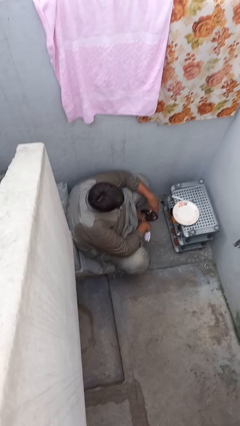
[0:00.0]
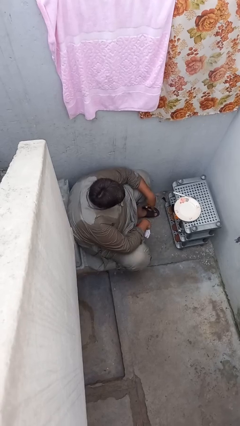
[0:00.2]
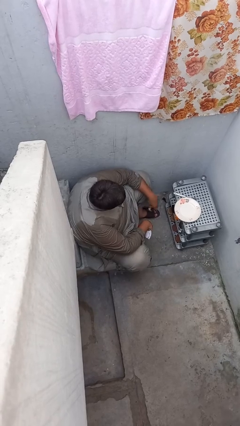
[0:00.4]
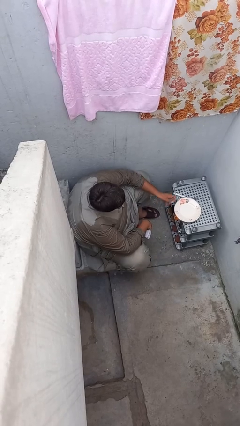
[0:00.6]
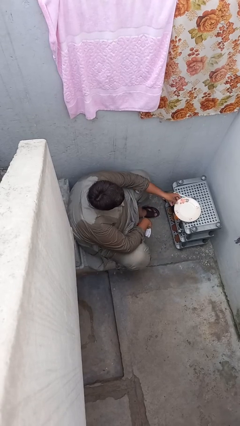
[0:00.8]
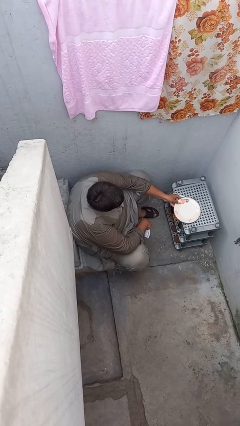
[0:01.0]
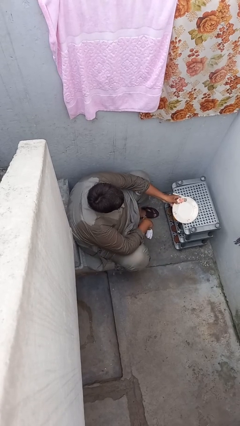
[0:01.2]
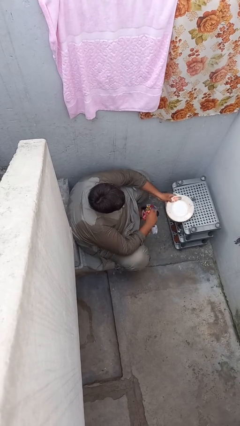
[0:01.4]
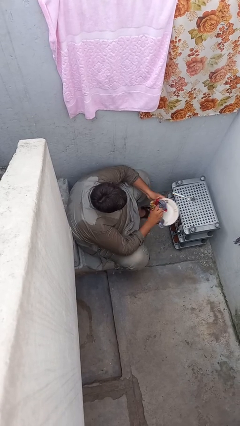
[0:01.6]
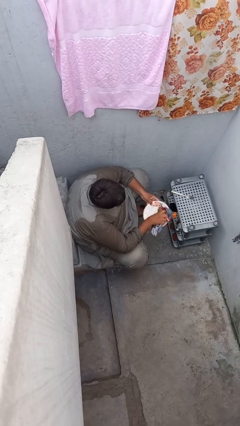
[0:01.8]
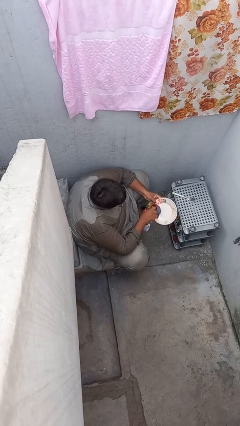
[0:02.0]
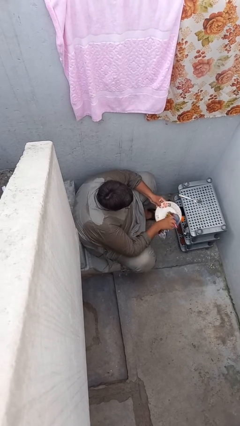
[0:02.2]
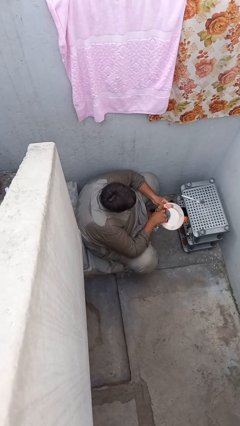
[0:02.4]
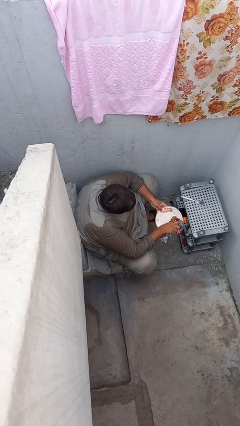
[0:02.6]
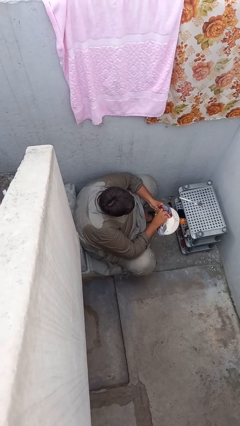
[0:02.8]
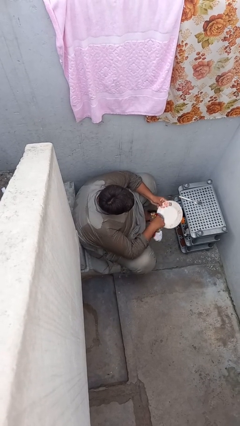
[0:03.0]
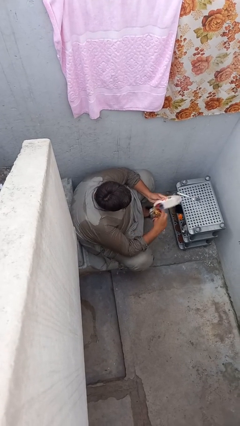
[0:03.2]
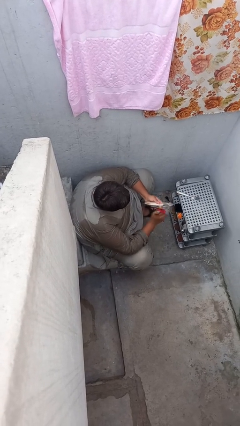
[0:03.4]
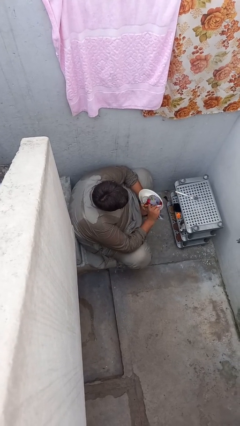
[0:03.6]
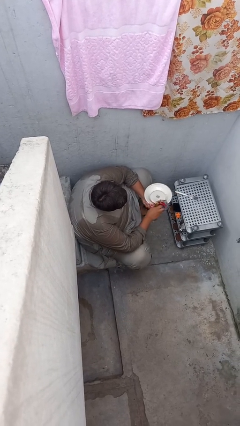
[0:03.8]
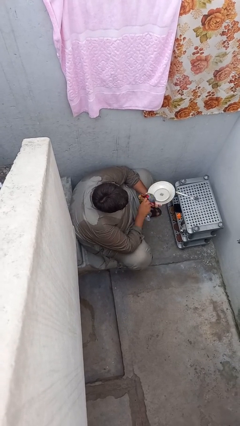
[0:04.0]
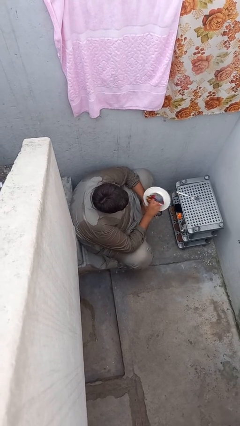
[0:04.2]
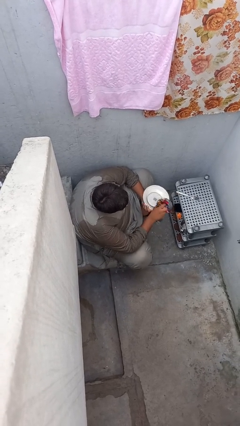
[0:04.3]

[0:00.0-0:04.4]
person dries dish

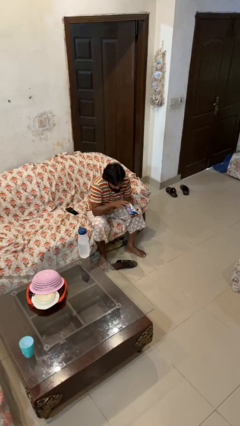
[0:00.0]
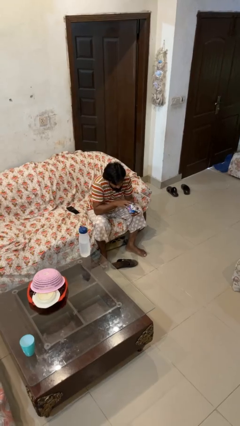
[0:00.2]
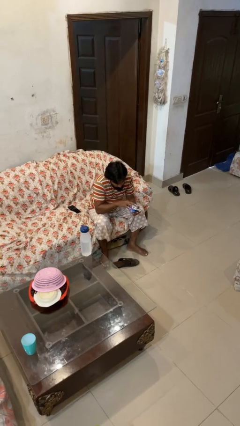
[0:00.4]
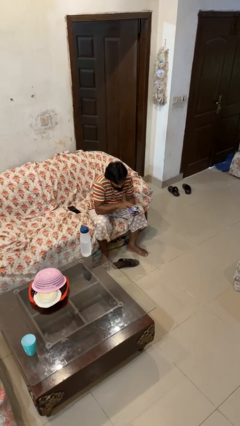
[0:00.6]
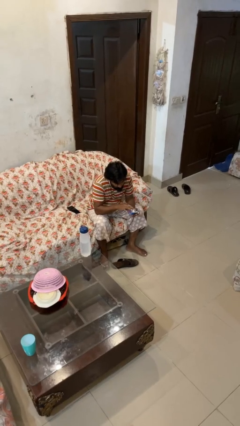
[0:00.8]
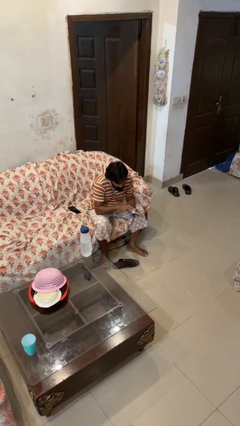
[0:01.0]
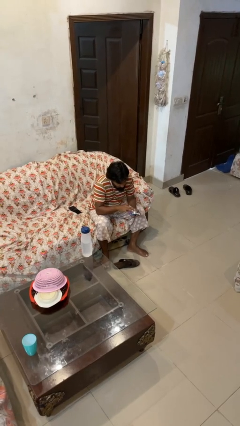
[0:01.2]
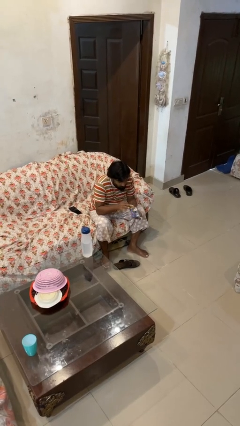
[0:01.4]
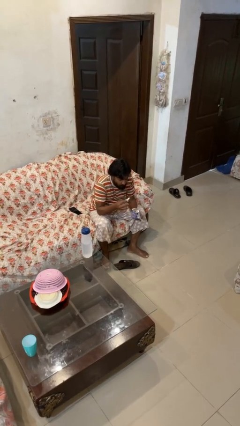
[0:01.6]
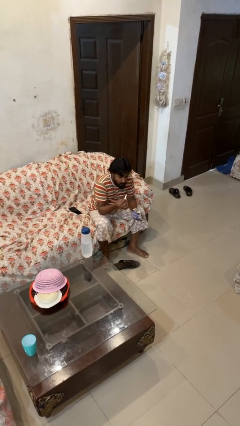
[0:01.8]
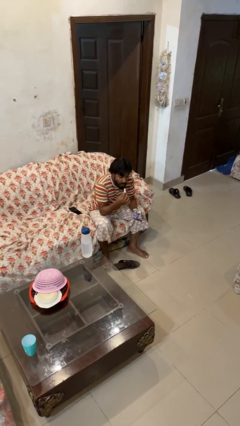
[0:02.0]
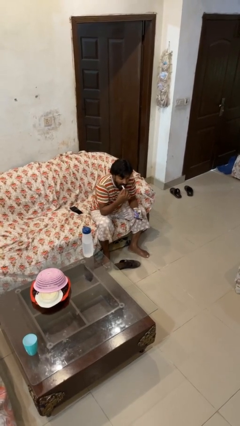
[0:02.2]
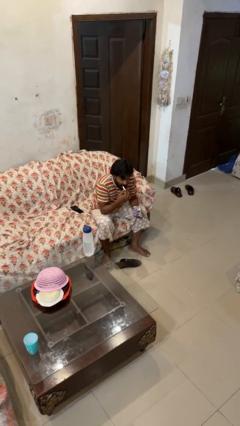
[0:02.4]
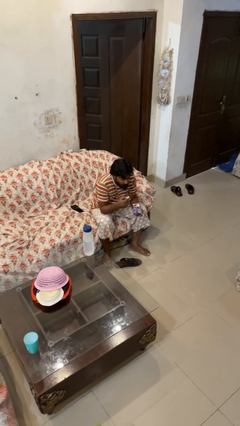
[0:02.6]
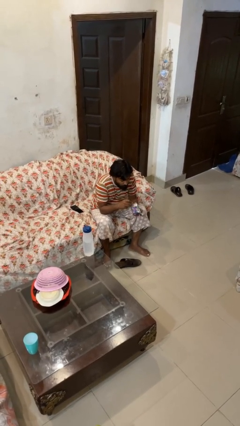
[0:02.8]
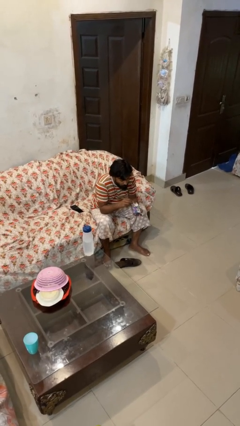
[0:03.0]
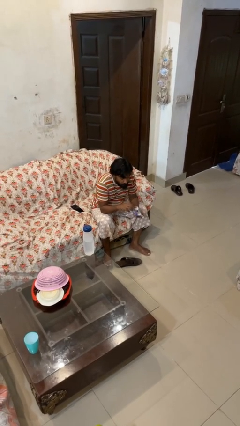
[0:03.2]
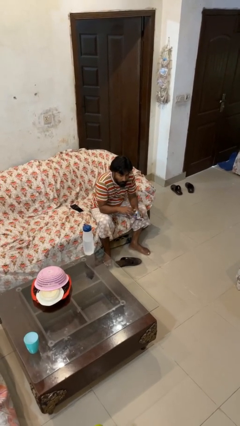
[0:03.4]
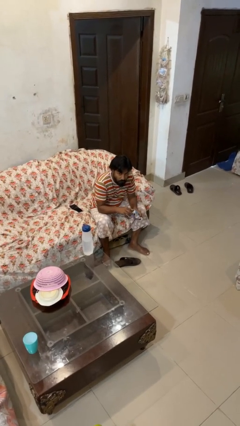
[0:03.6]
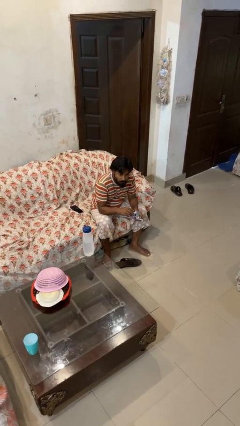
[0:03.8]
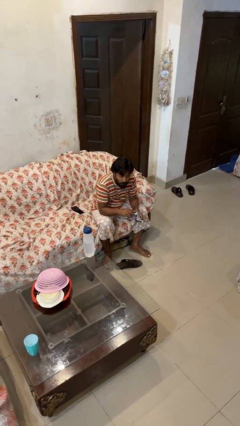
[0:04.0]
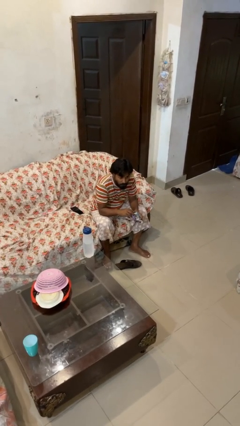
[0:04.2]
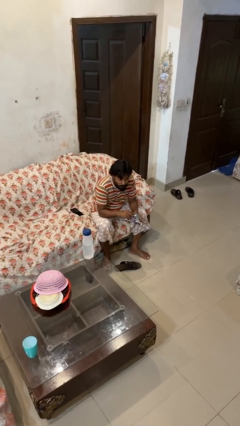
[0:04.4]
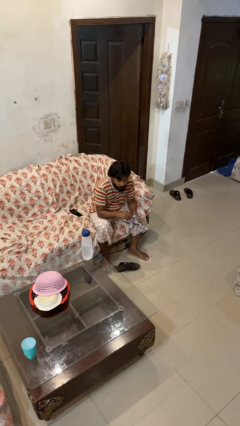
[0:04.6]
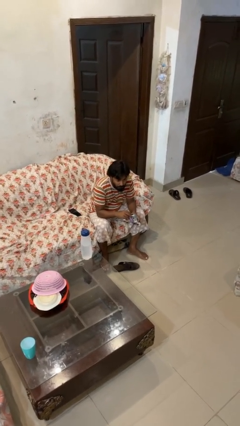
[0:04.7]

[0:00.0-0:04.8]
person eats snack from bag

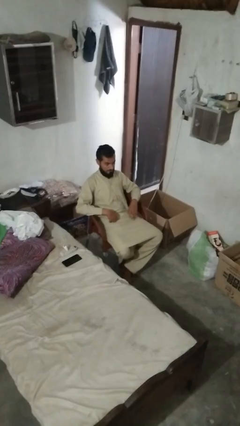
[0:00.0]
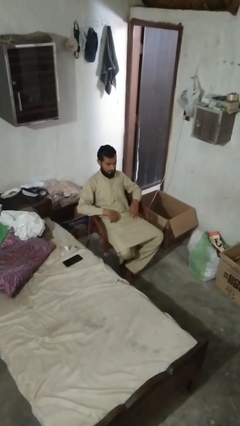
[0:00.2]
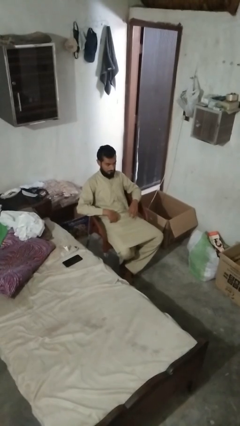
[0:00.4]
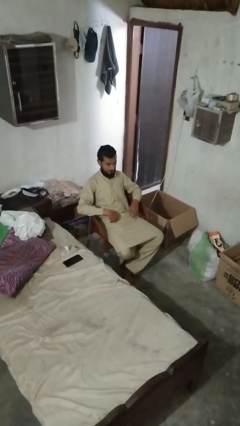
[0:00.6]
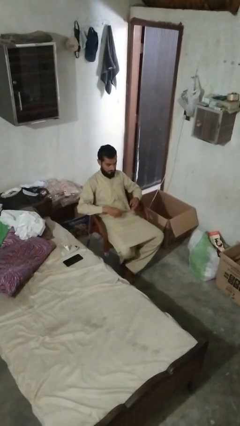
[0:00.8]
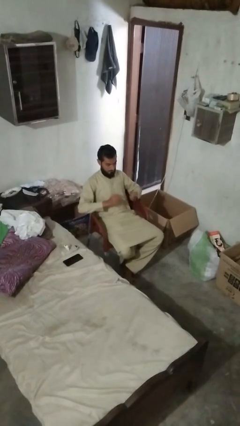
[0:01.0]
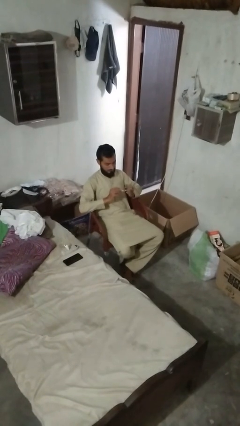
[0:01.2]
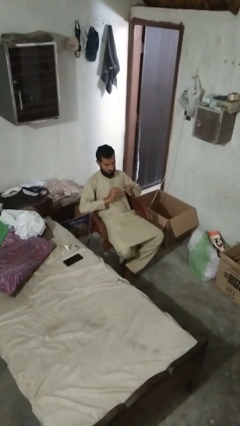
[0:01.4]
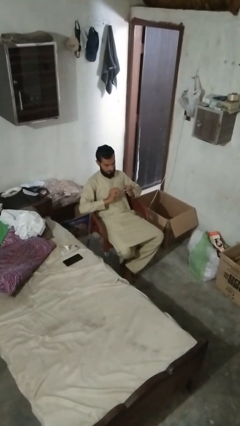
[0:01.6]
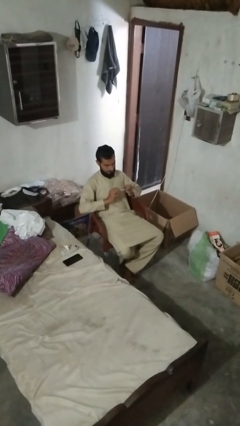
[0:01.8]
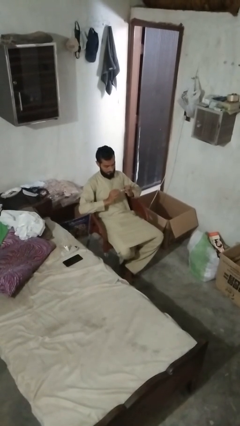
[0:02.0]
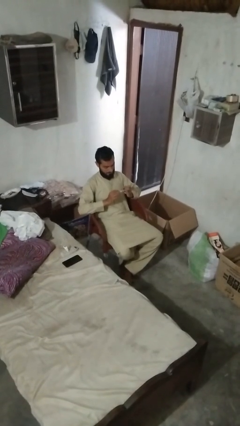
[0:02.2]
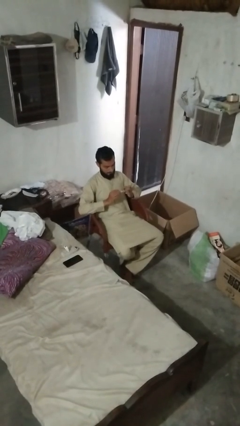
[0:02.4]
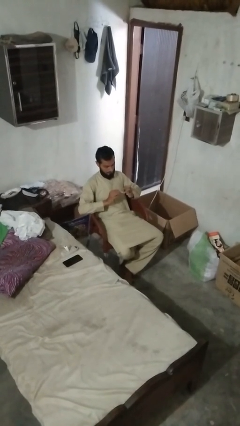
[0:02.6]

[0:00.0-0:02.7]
person clips fingernails

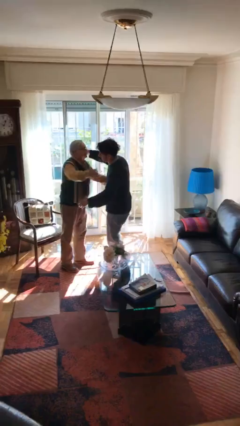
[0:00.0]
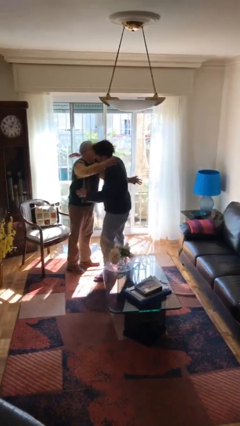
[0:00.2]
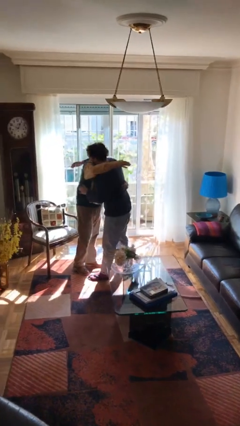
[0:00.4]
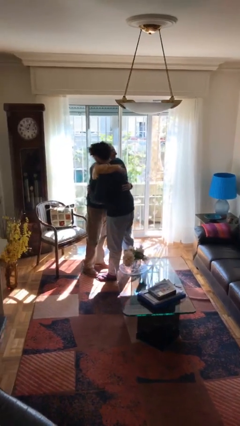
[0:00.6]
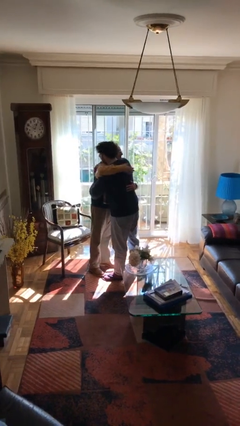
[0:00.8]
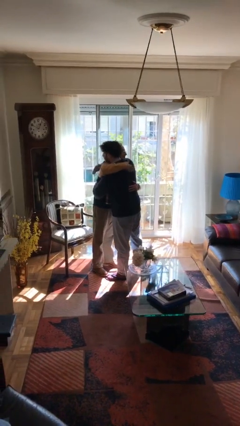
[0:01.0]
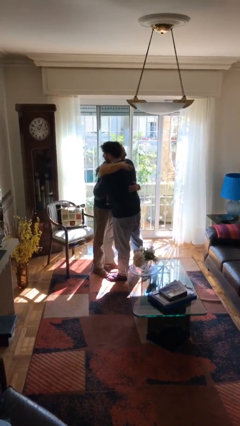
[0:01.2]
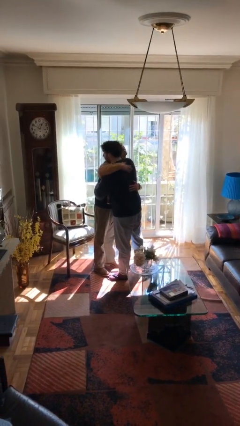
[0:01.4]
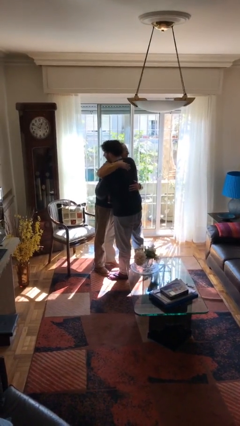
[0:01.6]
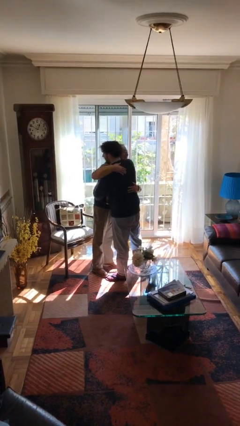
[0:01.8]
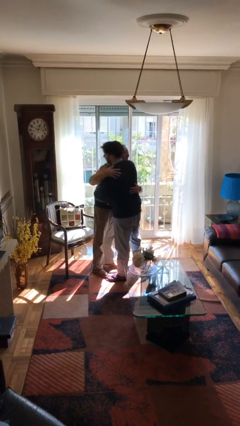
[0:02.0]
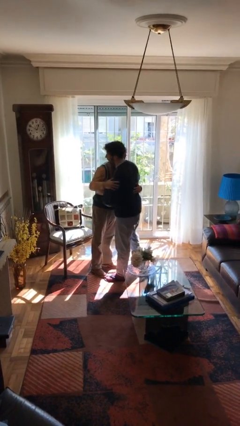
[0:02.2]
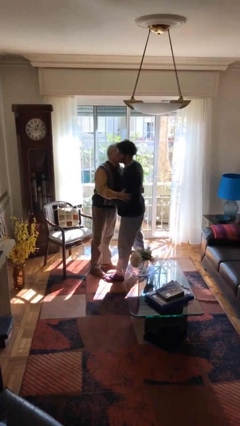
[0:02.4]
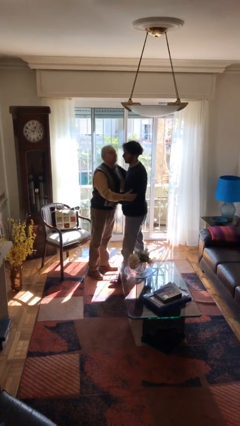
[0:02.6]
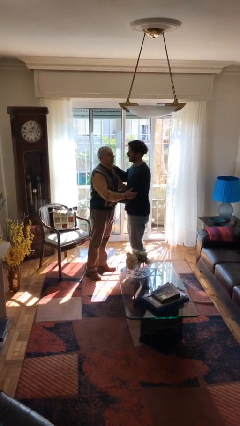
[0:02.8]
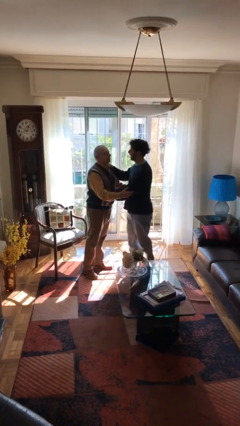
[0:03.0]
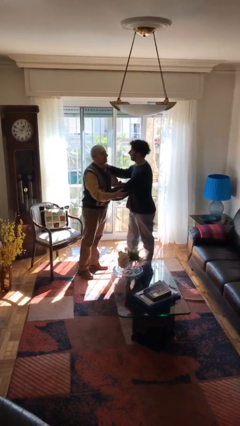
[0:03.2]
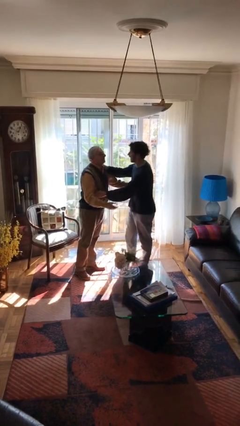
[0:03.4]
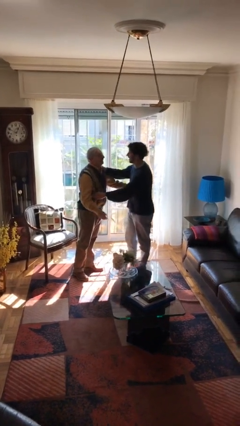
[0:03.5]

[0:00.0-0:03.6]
person embraces person

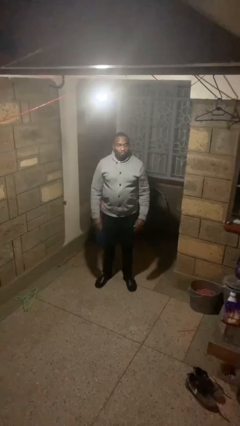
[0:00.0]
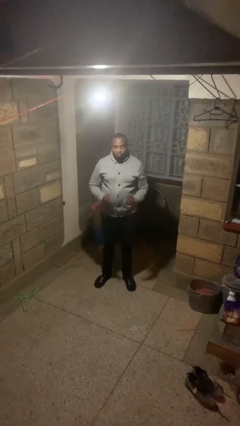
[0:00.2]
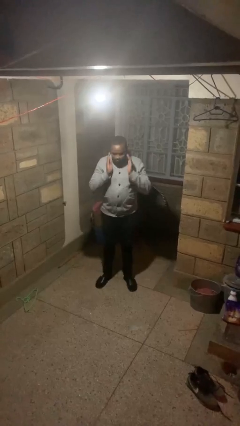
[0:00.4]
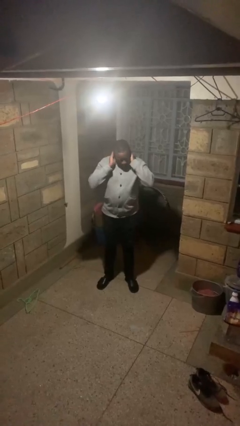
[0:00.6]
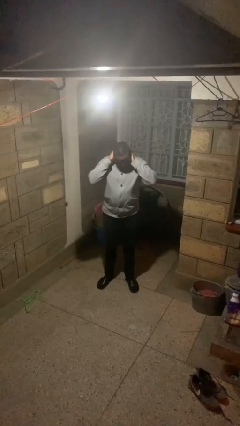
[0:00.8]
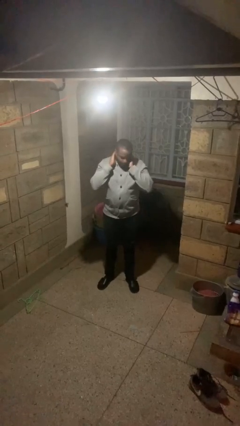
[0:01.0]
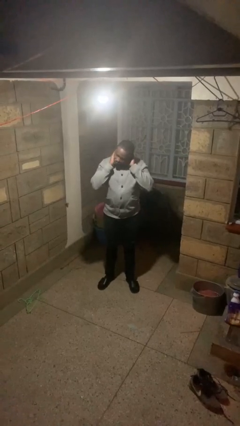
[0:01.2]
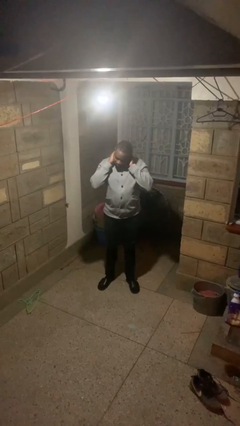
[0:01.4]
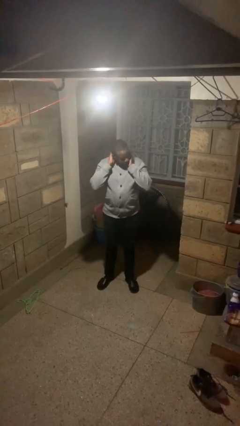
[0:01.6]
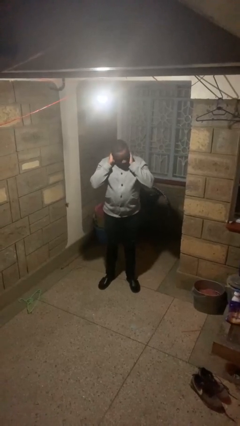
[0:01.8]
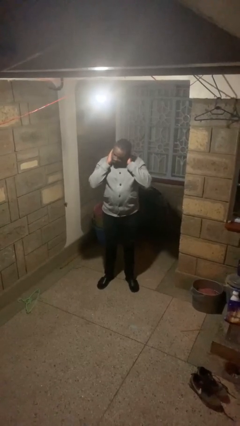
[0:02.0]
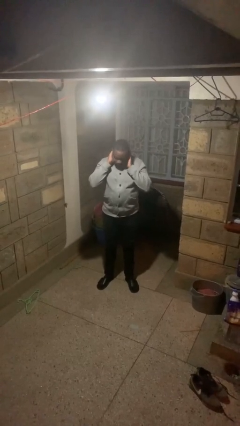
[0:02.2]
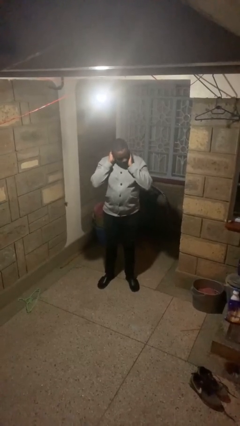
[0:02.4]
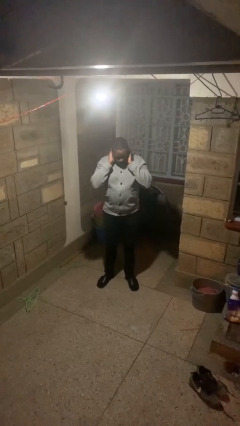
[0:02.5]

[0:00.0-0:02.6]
person rubs neck
